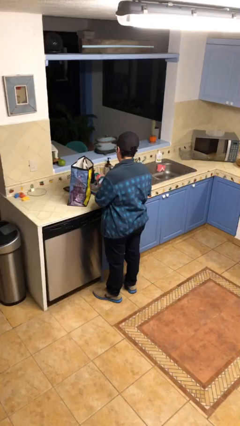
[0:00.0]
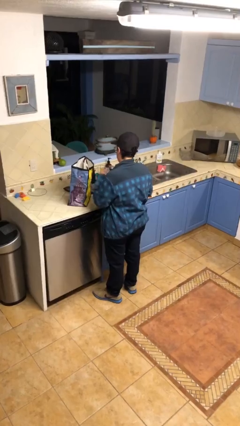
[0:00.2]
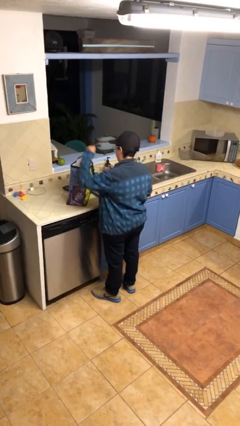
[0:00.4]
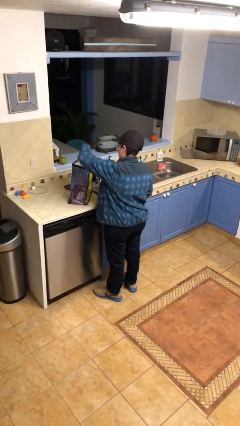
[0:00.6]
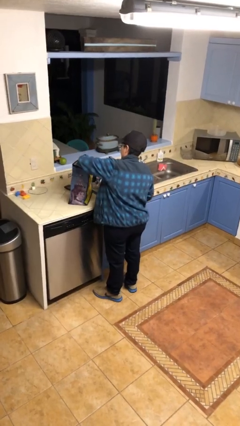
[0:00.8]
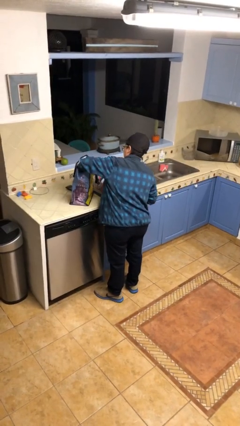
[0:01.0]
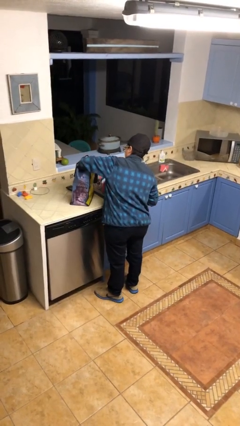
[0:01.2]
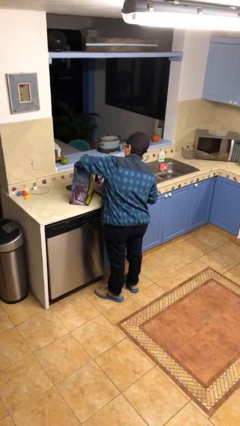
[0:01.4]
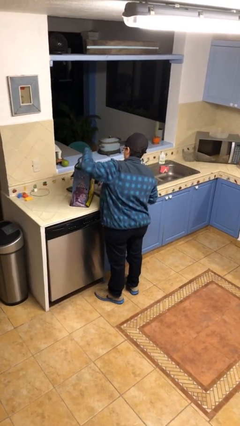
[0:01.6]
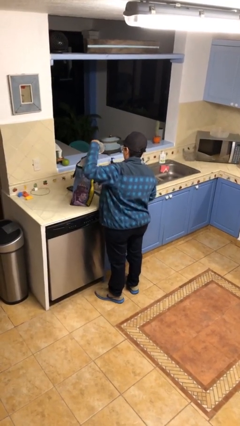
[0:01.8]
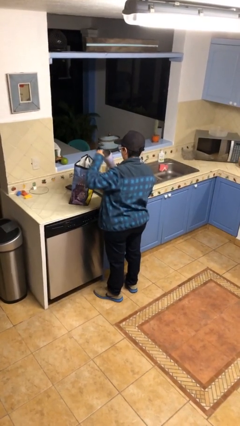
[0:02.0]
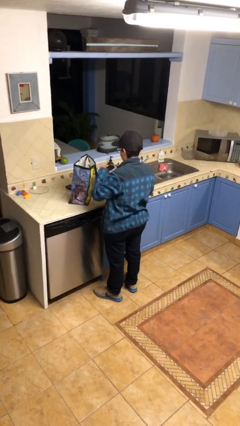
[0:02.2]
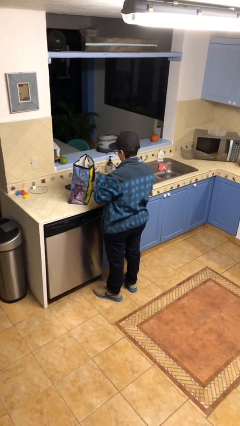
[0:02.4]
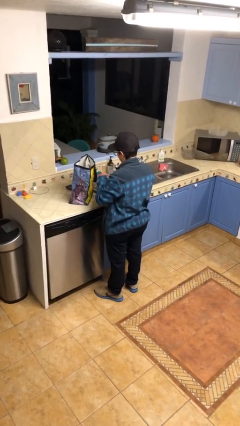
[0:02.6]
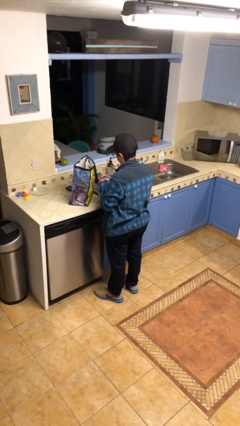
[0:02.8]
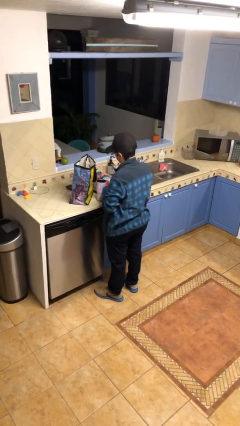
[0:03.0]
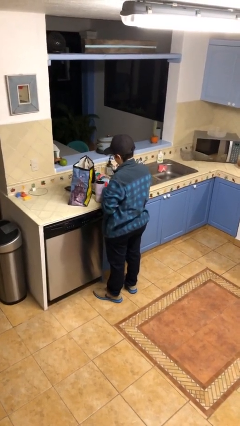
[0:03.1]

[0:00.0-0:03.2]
person takes object from bag

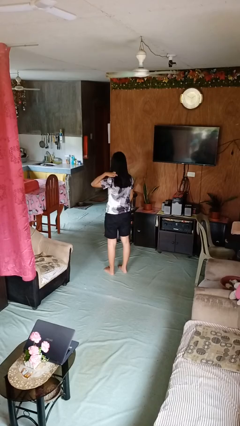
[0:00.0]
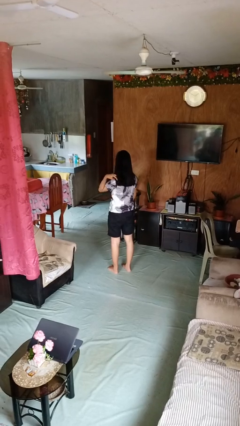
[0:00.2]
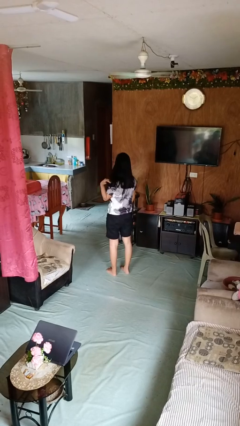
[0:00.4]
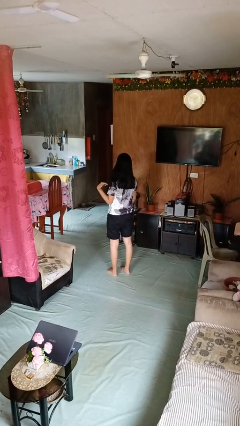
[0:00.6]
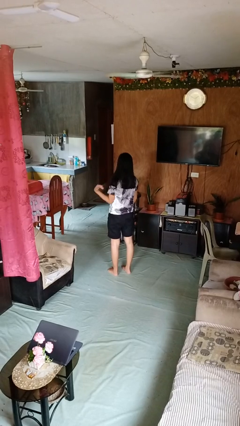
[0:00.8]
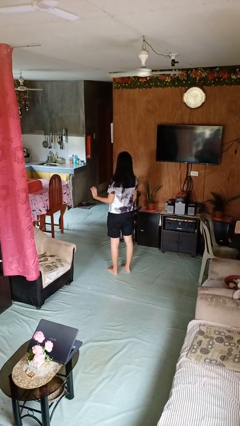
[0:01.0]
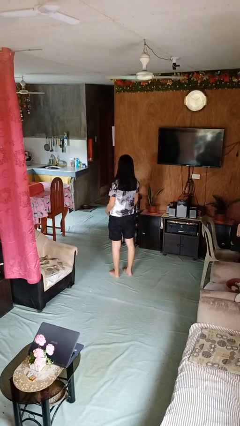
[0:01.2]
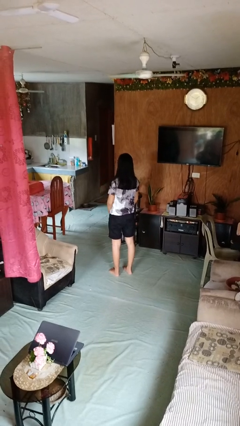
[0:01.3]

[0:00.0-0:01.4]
person strokes hair

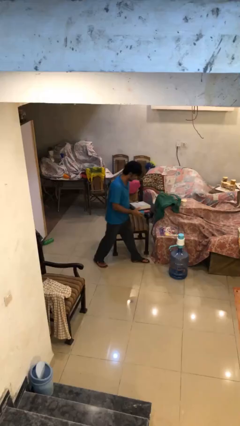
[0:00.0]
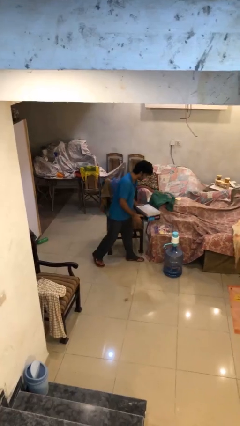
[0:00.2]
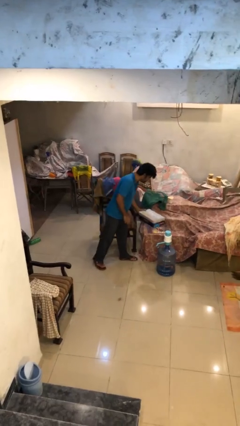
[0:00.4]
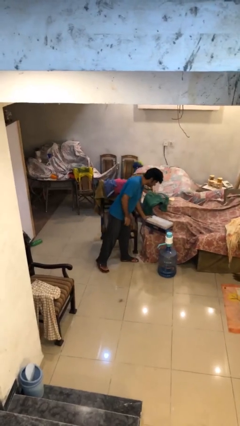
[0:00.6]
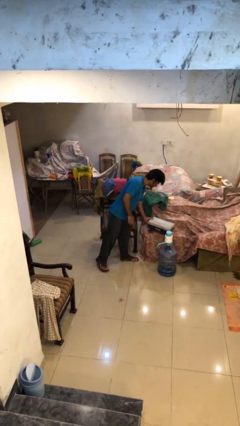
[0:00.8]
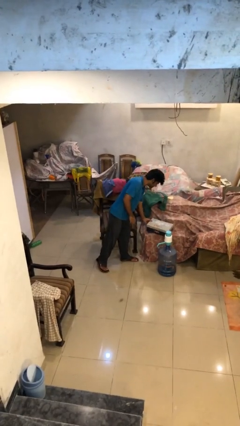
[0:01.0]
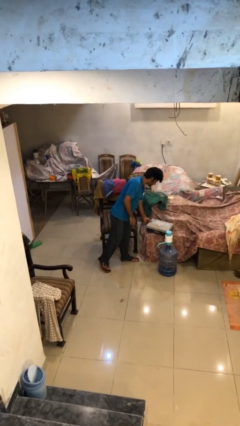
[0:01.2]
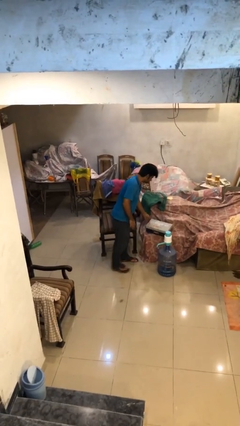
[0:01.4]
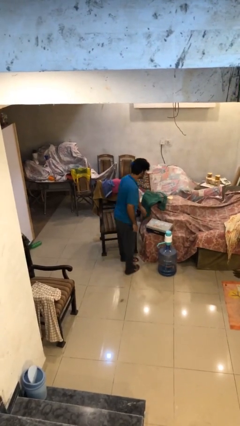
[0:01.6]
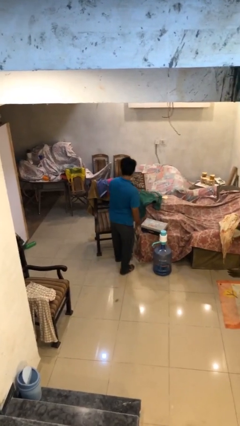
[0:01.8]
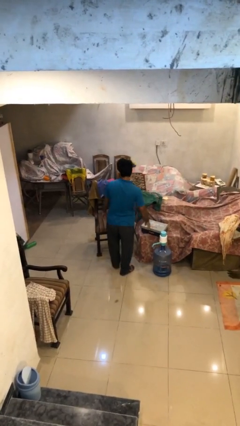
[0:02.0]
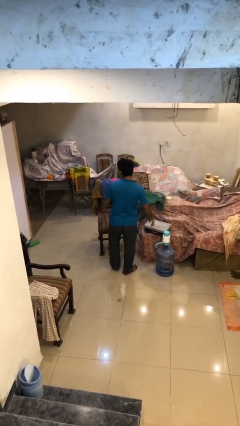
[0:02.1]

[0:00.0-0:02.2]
person puts down object on table

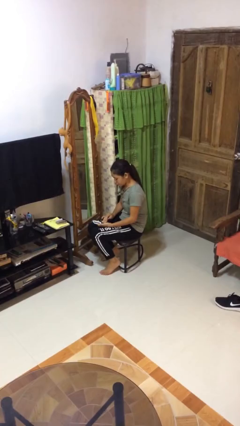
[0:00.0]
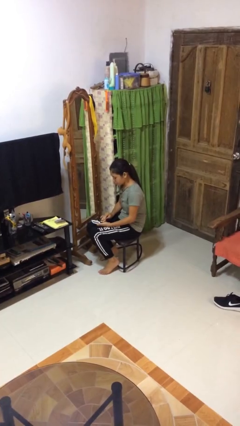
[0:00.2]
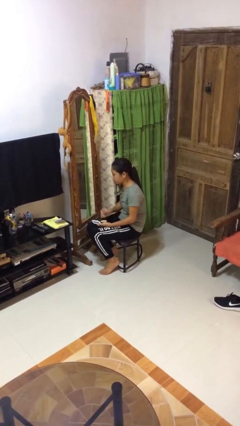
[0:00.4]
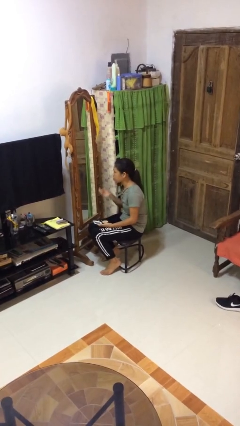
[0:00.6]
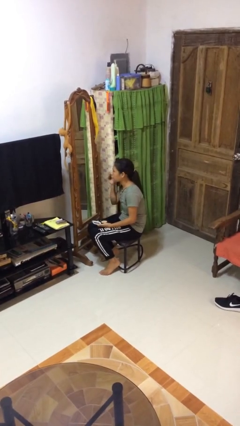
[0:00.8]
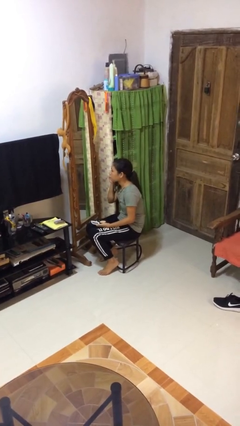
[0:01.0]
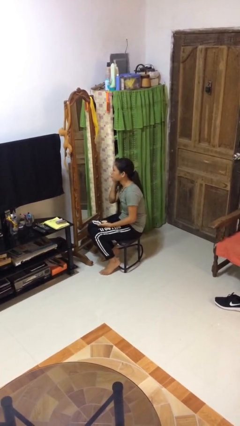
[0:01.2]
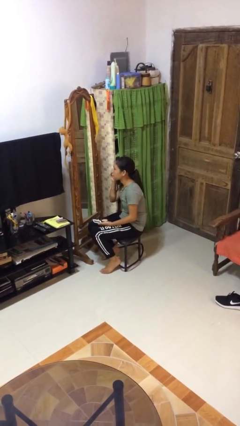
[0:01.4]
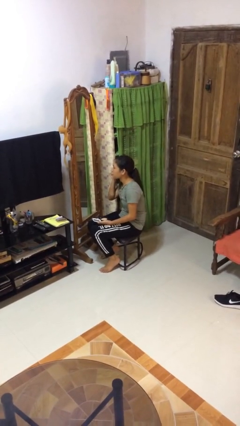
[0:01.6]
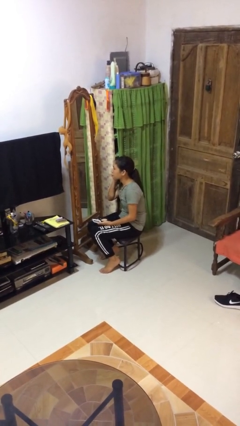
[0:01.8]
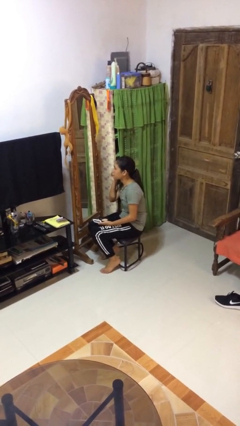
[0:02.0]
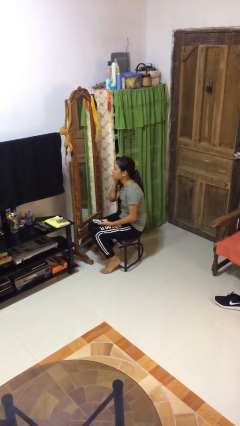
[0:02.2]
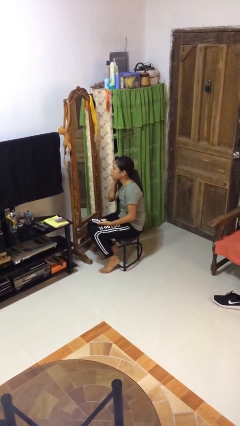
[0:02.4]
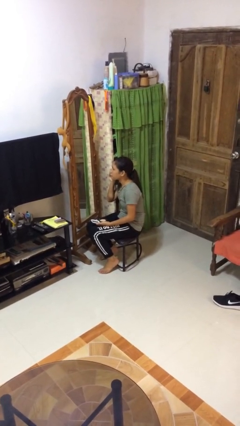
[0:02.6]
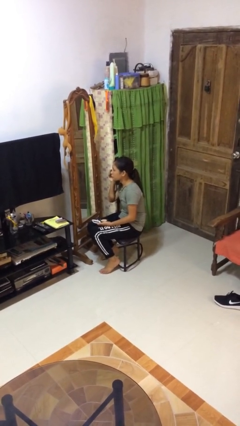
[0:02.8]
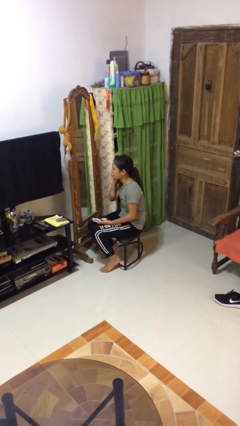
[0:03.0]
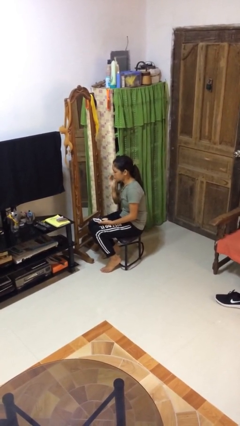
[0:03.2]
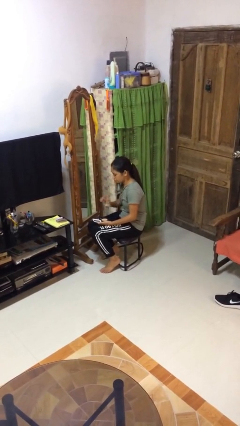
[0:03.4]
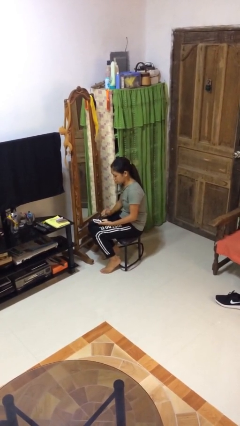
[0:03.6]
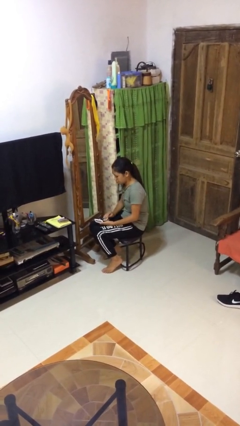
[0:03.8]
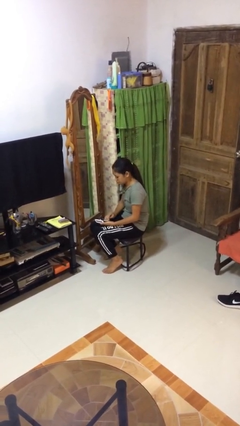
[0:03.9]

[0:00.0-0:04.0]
person applies foundation makeup

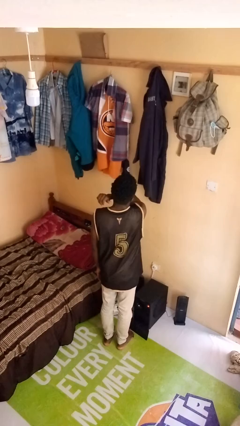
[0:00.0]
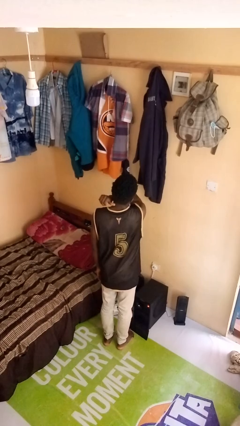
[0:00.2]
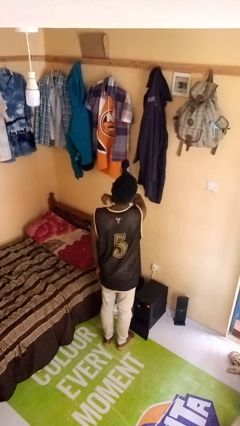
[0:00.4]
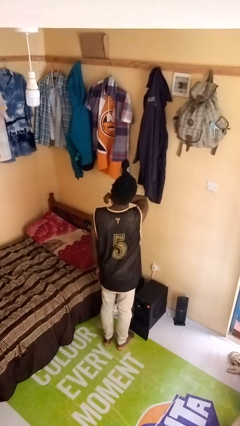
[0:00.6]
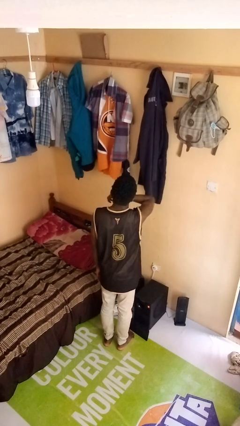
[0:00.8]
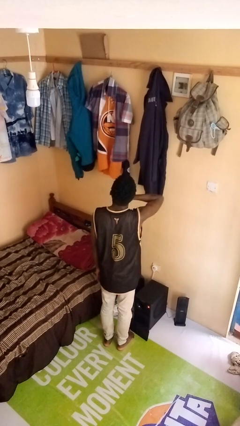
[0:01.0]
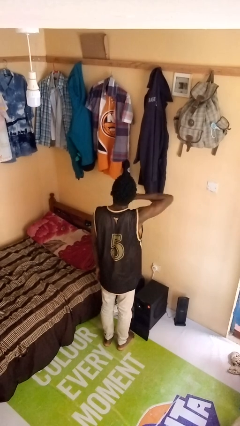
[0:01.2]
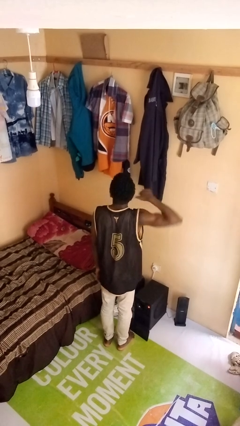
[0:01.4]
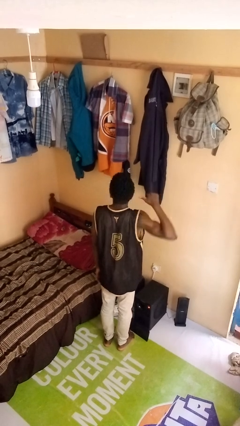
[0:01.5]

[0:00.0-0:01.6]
person gestures cut

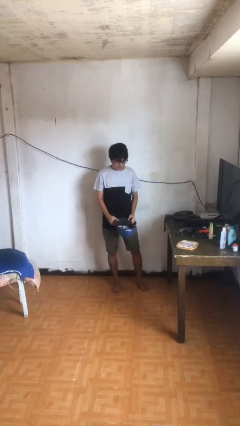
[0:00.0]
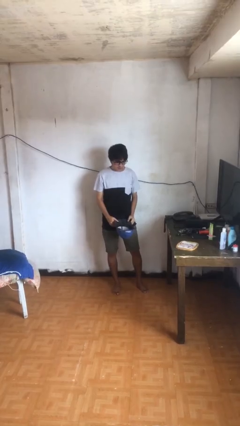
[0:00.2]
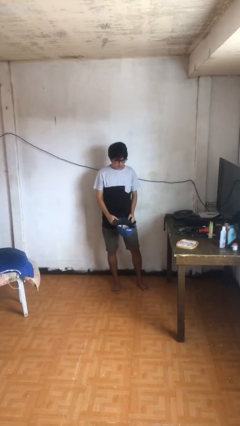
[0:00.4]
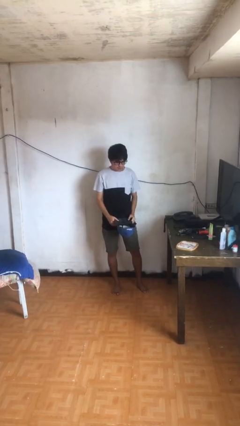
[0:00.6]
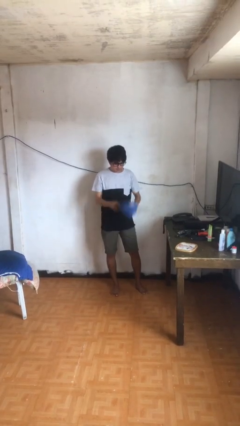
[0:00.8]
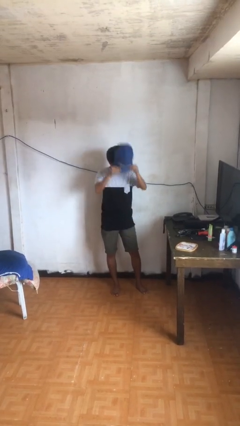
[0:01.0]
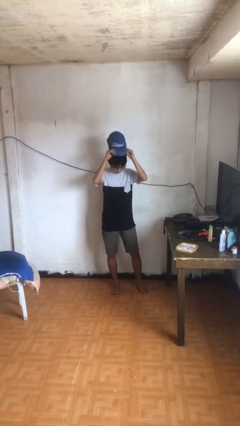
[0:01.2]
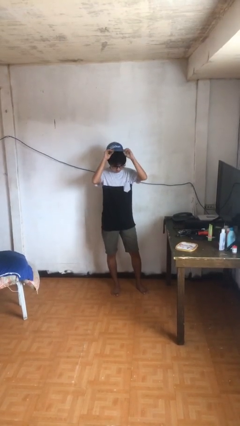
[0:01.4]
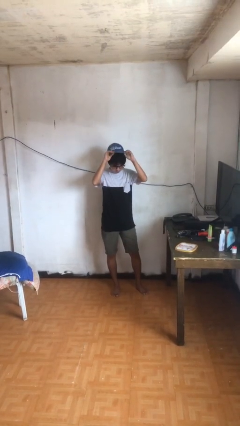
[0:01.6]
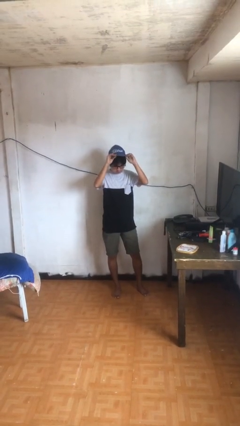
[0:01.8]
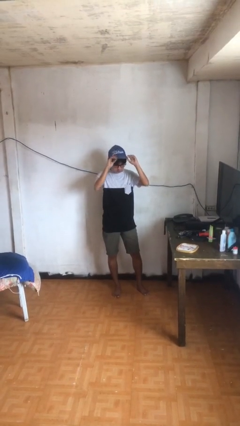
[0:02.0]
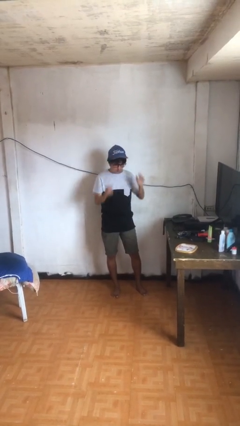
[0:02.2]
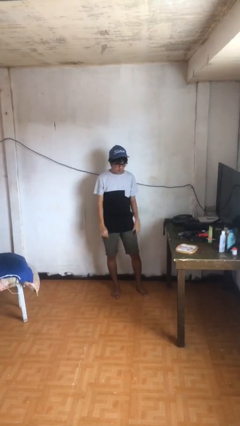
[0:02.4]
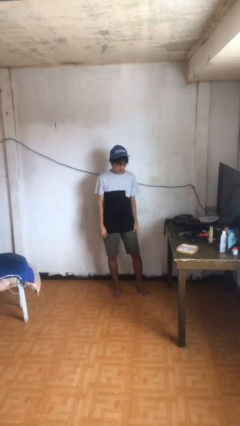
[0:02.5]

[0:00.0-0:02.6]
person puts on hat

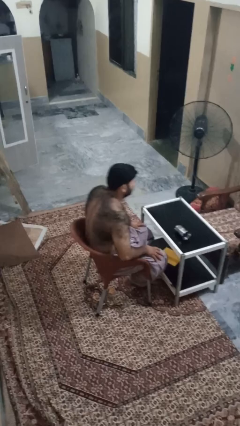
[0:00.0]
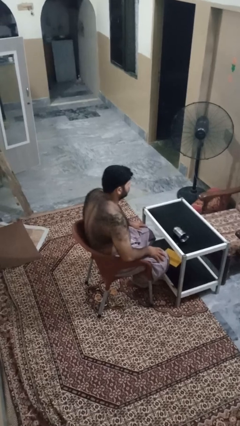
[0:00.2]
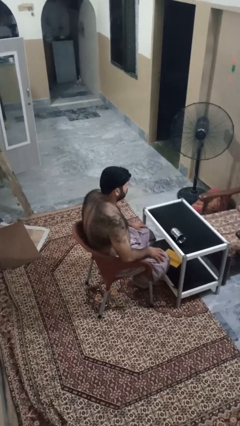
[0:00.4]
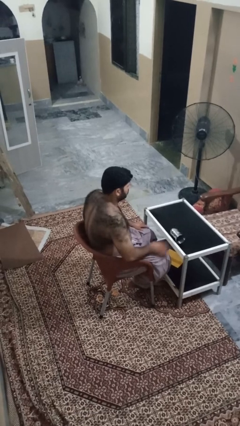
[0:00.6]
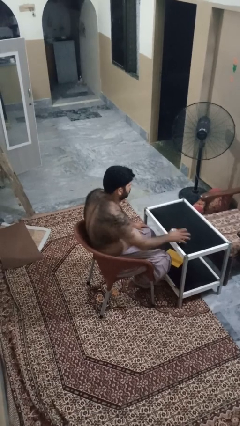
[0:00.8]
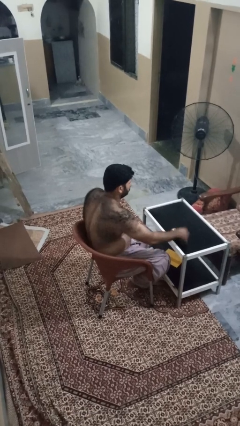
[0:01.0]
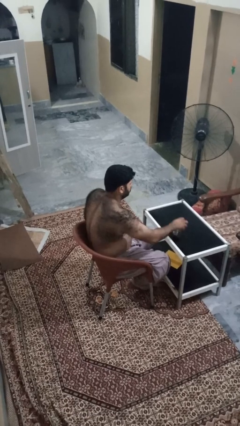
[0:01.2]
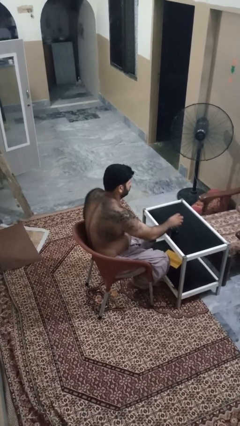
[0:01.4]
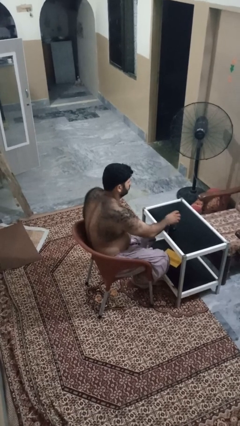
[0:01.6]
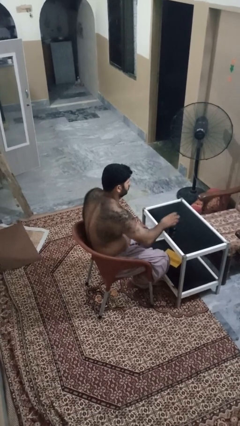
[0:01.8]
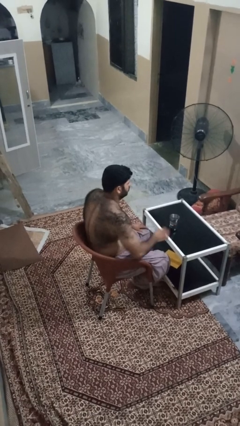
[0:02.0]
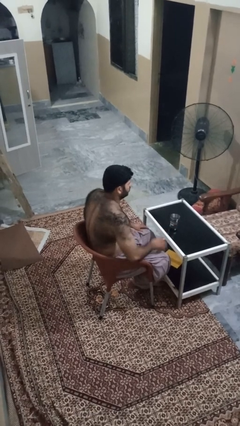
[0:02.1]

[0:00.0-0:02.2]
person sets upright glass
